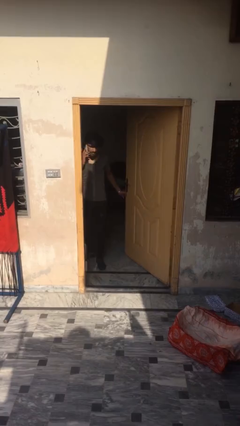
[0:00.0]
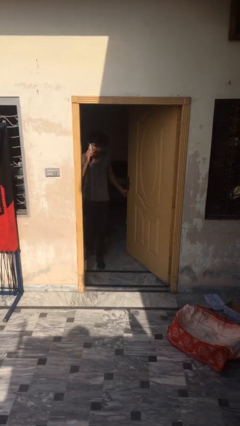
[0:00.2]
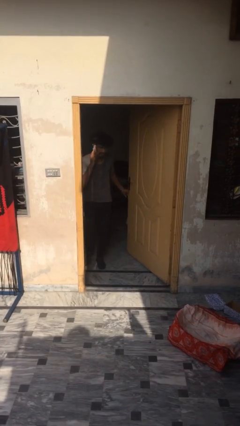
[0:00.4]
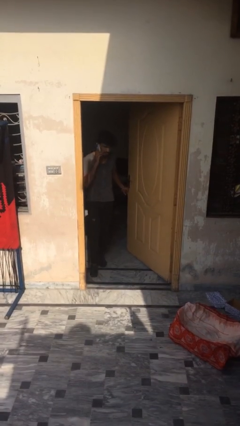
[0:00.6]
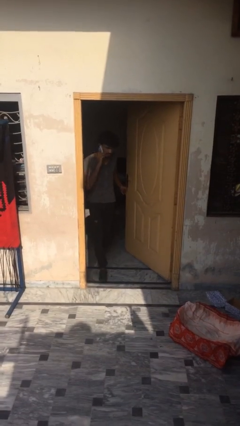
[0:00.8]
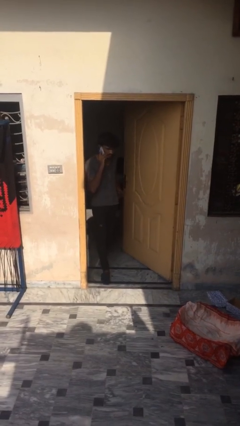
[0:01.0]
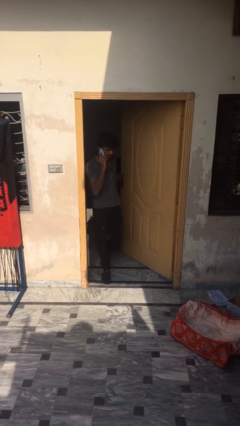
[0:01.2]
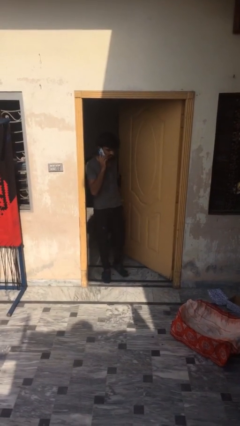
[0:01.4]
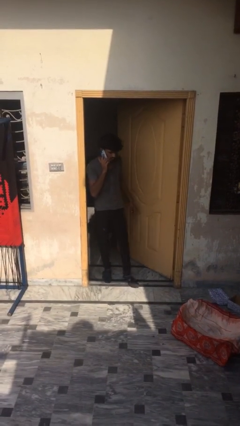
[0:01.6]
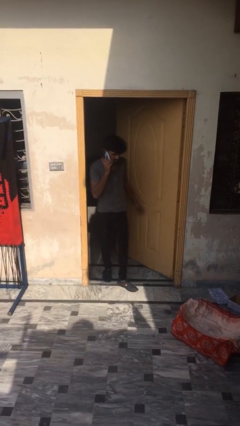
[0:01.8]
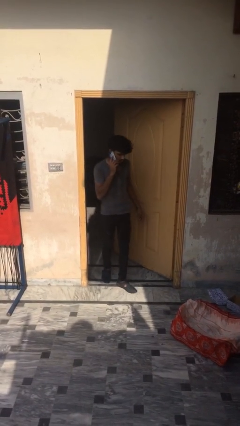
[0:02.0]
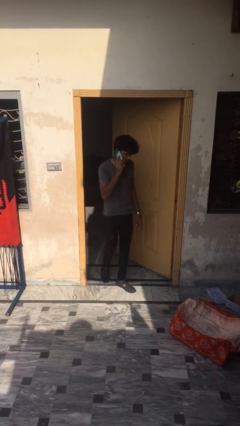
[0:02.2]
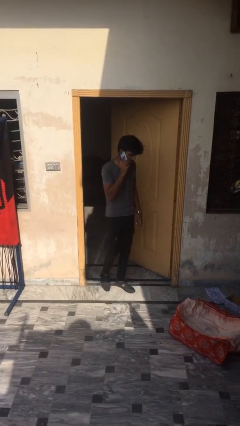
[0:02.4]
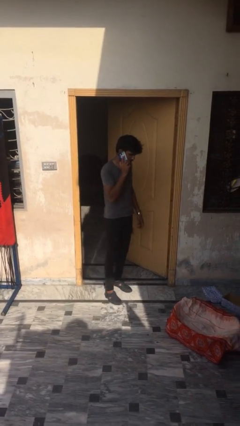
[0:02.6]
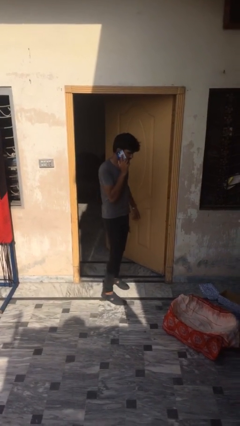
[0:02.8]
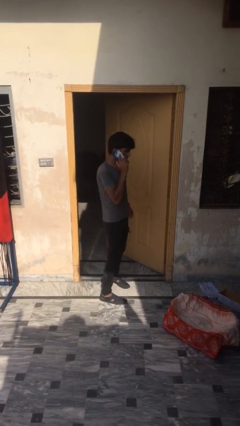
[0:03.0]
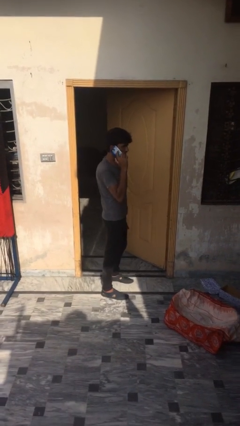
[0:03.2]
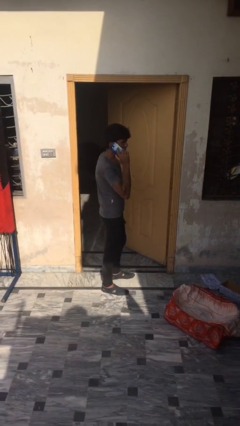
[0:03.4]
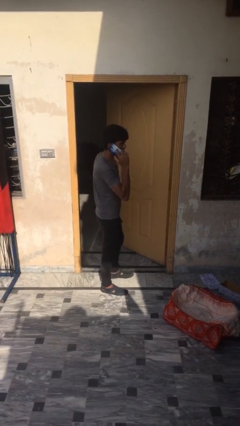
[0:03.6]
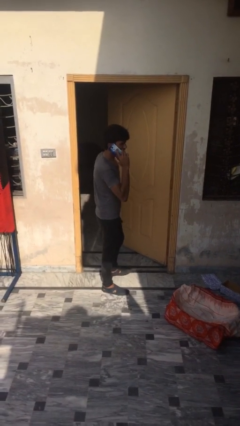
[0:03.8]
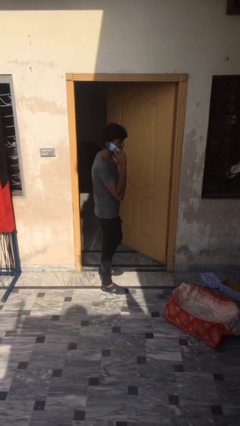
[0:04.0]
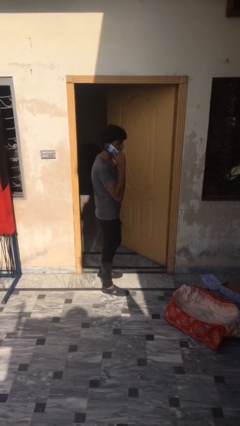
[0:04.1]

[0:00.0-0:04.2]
person enters scene through structure

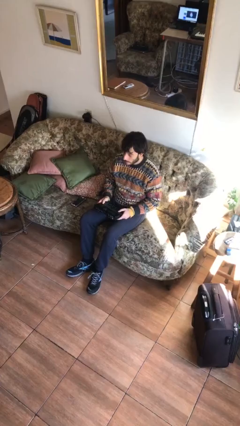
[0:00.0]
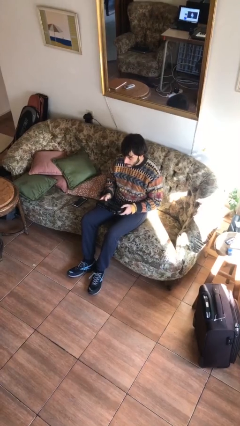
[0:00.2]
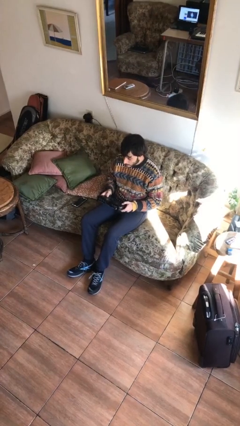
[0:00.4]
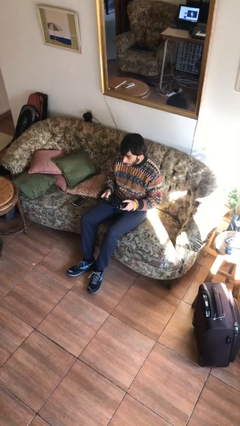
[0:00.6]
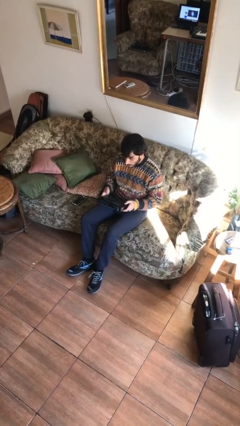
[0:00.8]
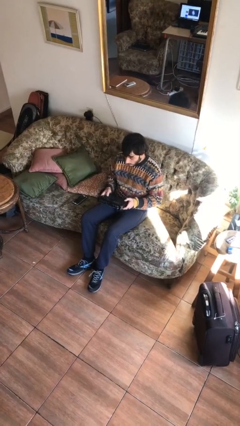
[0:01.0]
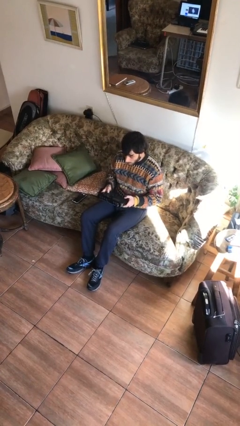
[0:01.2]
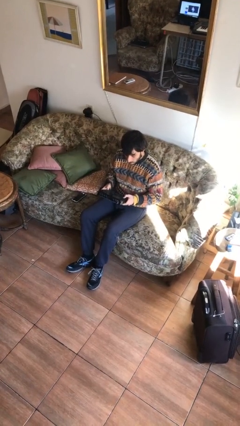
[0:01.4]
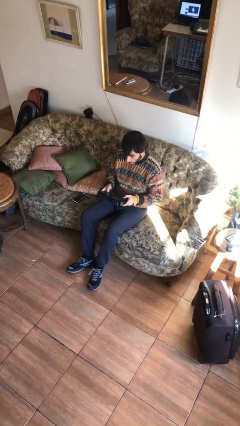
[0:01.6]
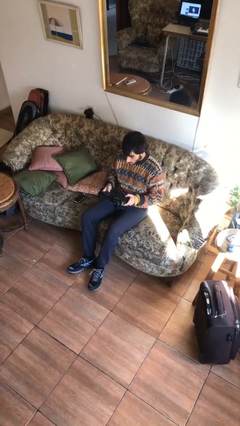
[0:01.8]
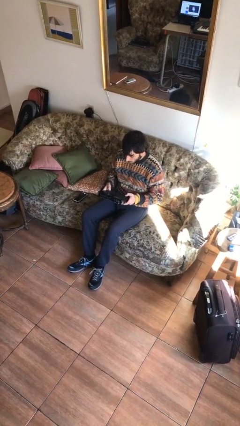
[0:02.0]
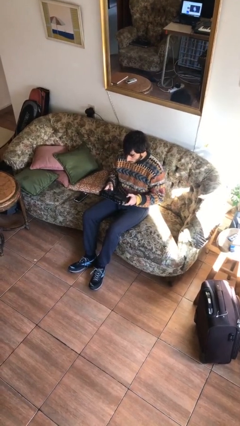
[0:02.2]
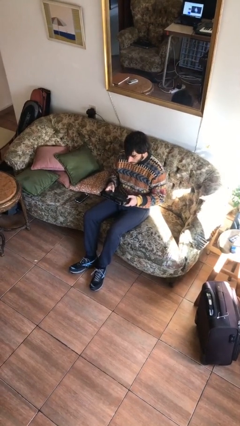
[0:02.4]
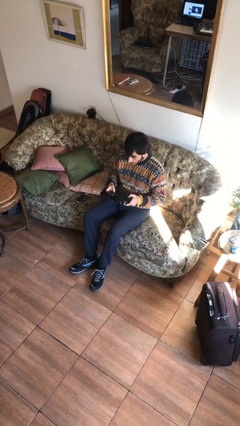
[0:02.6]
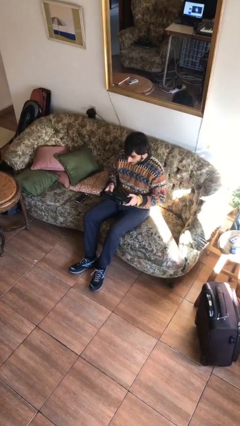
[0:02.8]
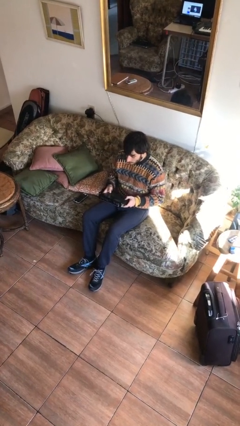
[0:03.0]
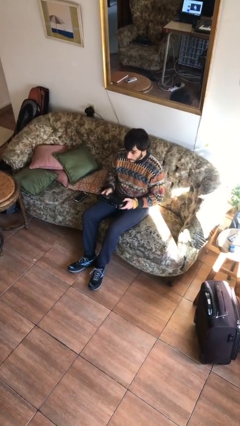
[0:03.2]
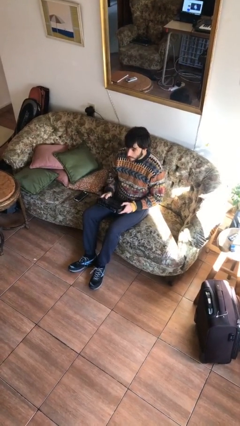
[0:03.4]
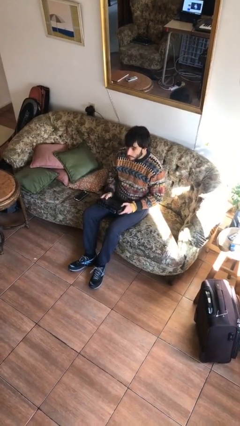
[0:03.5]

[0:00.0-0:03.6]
person interacts with handheld game

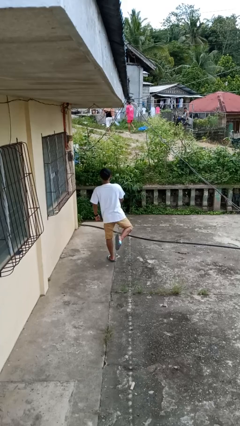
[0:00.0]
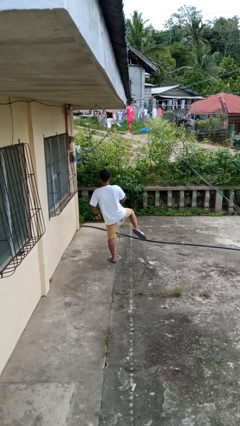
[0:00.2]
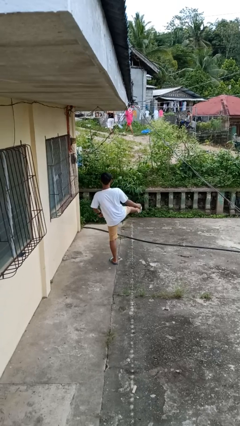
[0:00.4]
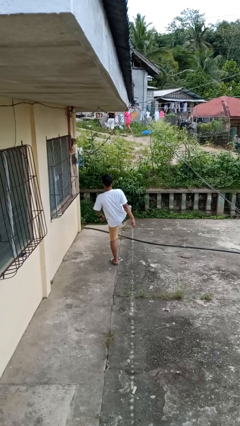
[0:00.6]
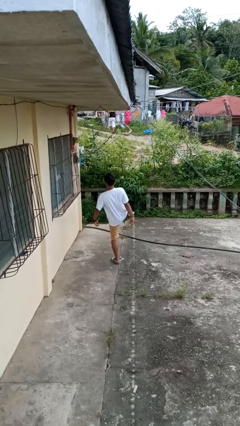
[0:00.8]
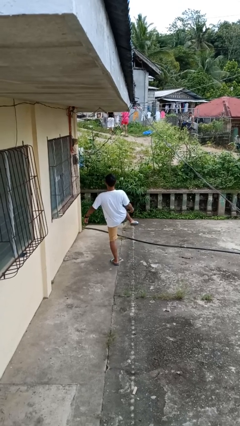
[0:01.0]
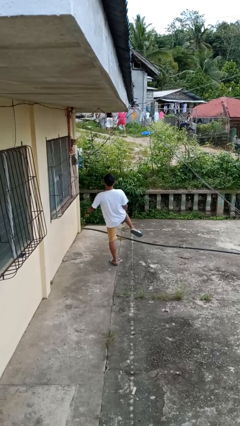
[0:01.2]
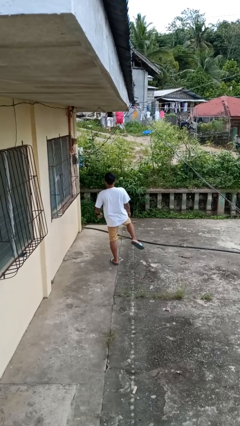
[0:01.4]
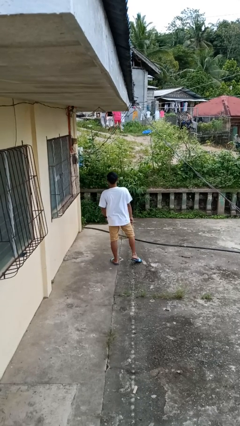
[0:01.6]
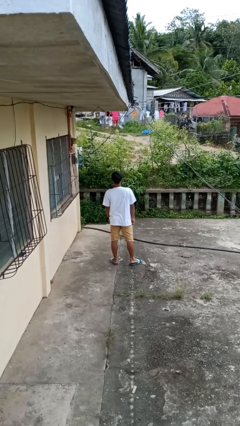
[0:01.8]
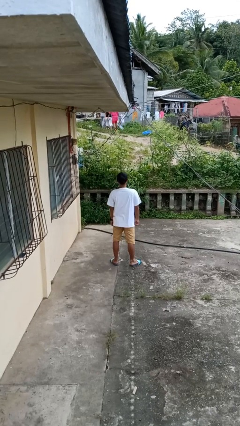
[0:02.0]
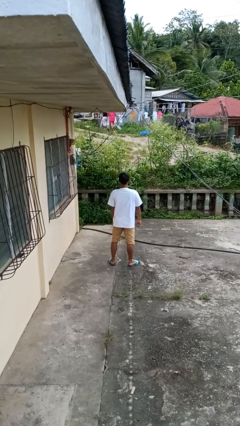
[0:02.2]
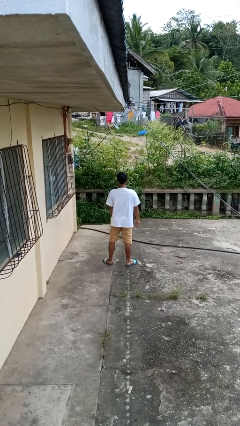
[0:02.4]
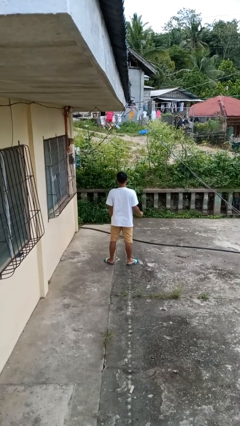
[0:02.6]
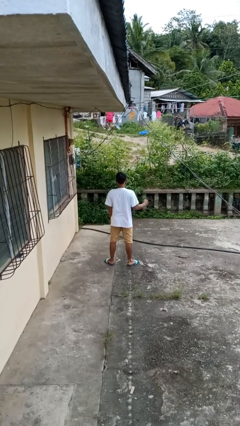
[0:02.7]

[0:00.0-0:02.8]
person karate kicks

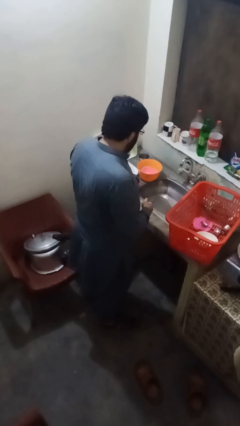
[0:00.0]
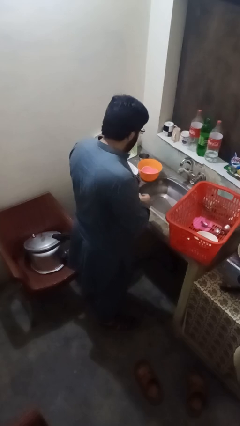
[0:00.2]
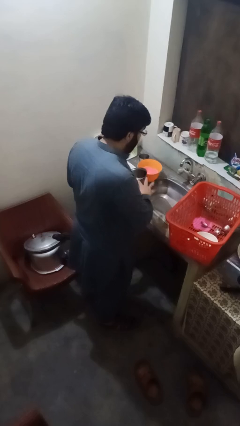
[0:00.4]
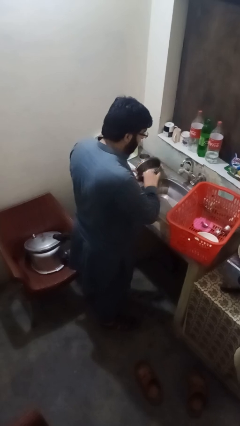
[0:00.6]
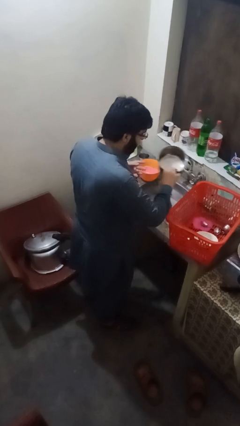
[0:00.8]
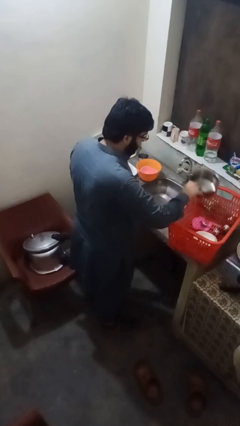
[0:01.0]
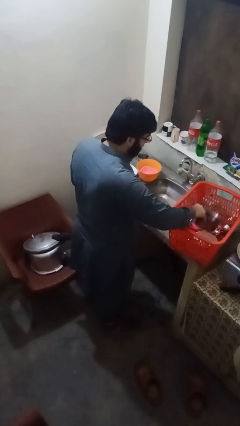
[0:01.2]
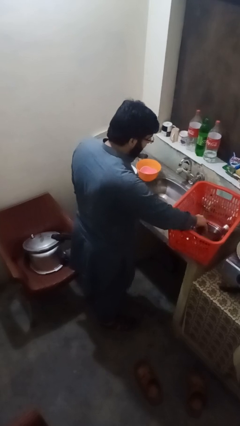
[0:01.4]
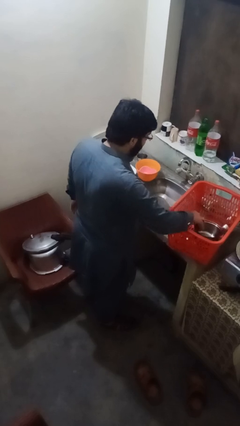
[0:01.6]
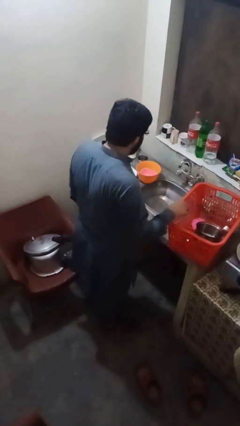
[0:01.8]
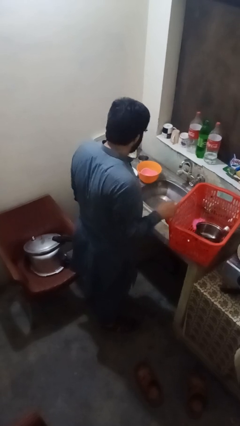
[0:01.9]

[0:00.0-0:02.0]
person loads dishwasher

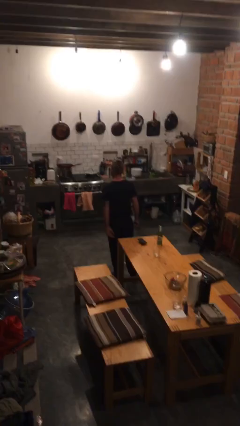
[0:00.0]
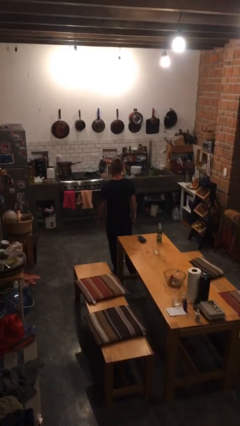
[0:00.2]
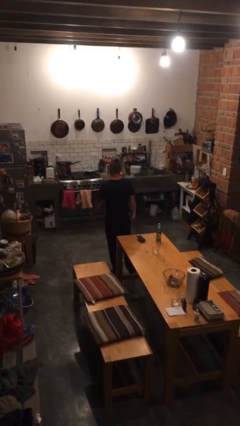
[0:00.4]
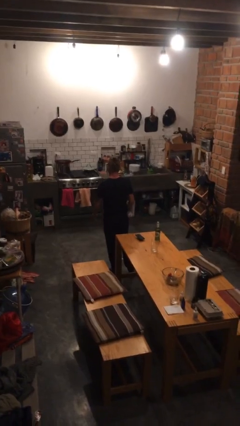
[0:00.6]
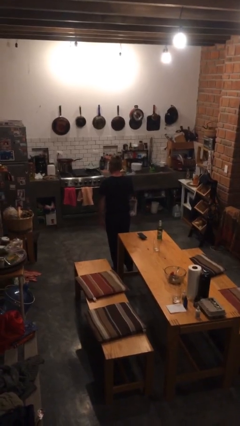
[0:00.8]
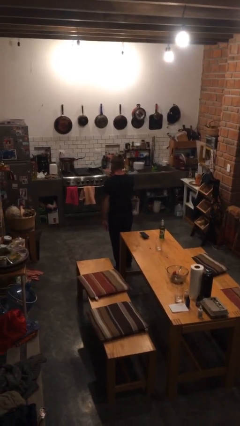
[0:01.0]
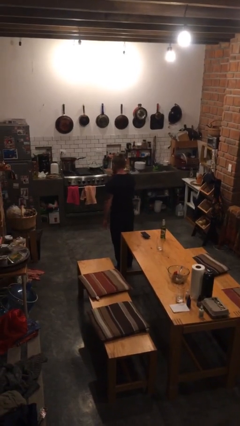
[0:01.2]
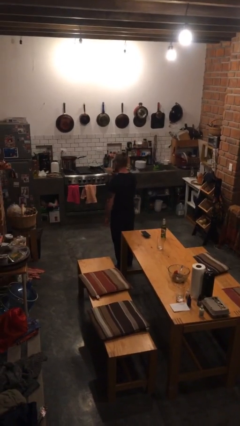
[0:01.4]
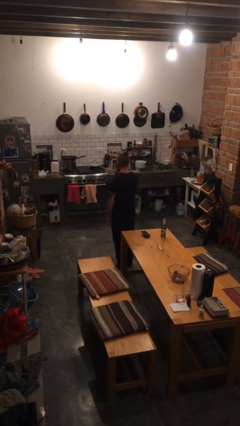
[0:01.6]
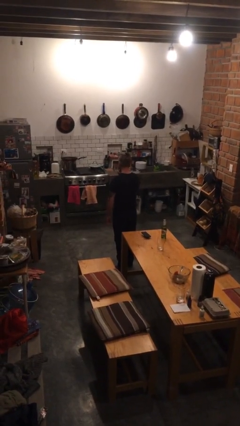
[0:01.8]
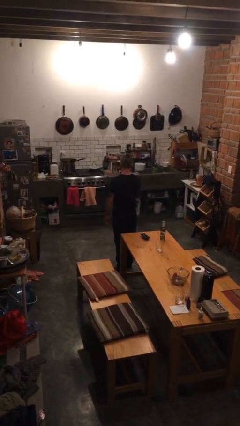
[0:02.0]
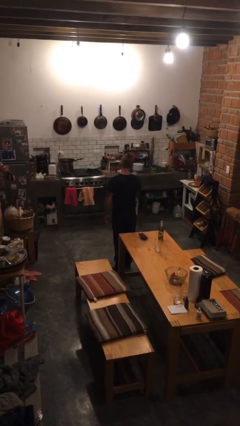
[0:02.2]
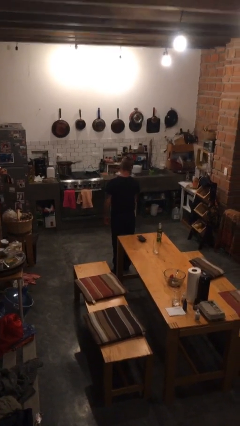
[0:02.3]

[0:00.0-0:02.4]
person gestures be quiet

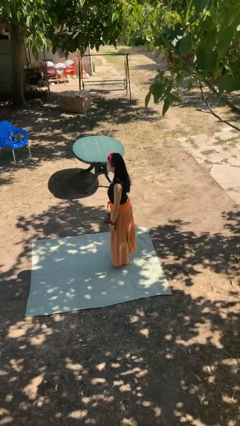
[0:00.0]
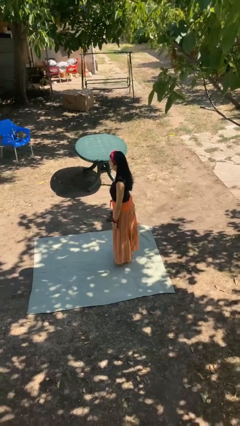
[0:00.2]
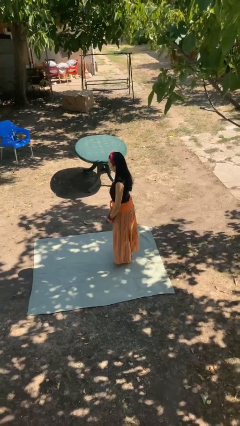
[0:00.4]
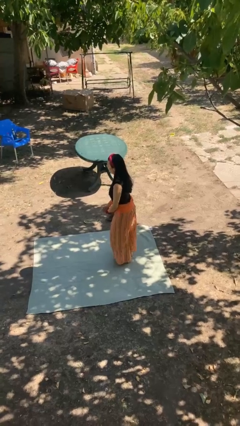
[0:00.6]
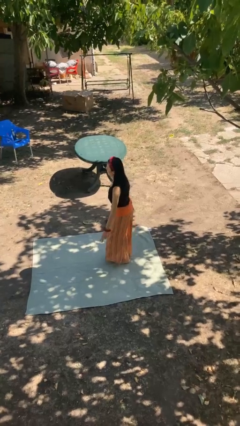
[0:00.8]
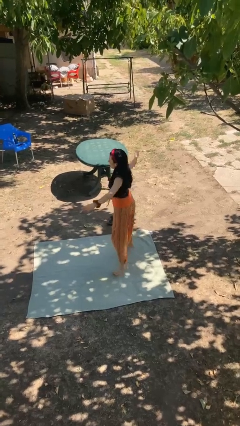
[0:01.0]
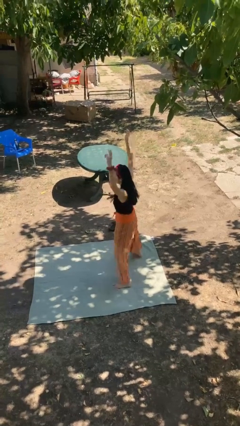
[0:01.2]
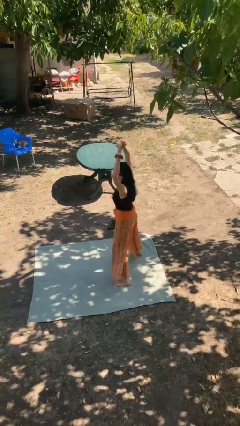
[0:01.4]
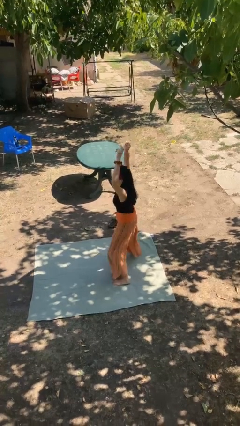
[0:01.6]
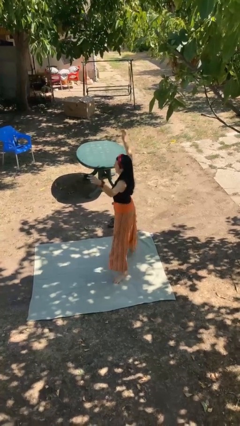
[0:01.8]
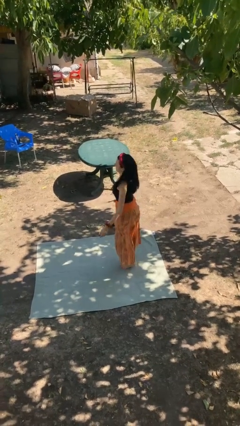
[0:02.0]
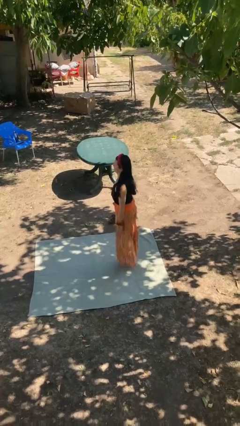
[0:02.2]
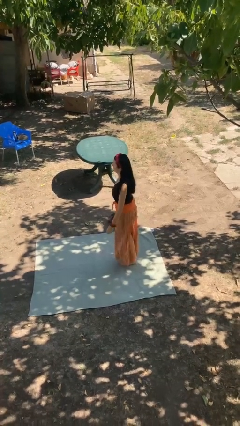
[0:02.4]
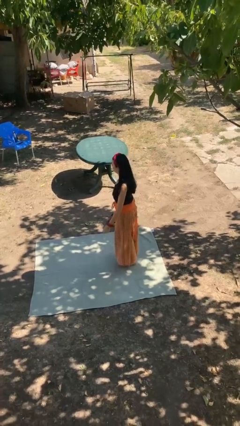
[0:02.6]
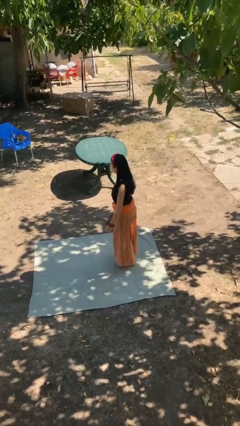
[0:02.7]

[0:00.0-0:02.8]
person exercises with jumping jacks
